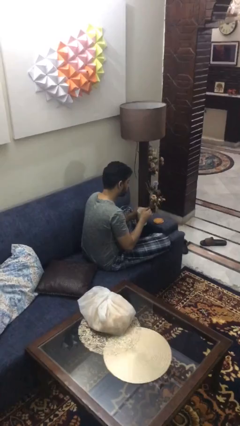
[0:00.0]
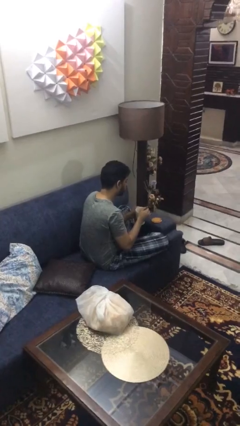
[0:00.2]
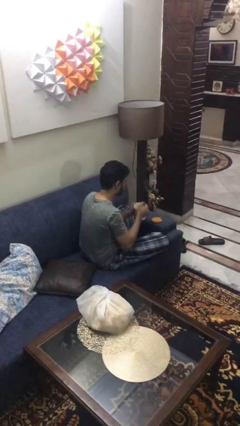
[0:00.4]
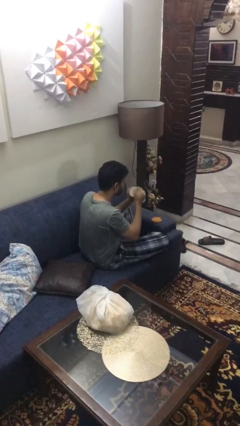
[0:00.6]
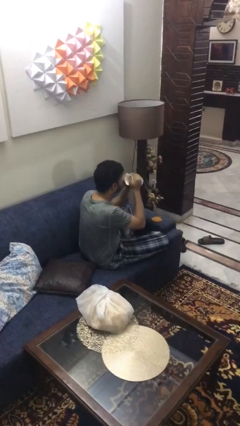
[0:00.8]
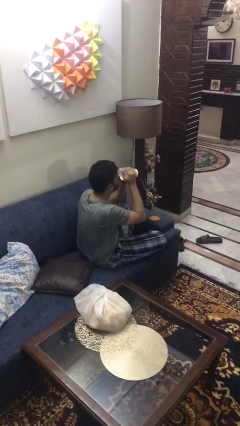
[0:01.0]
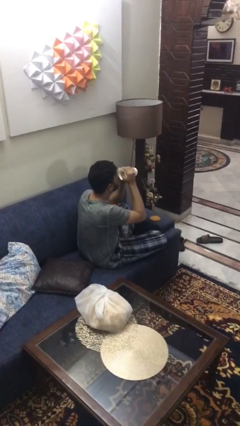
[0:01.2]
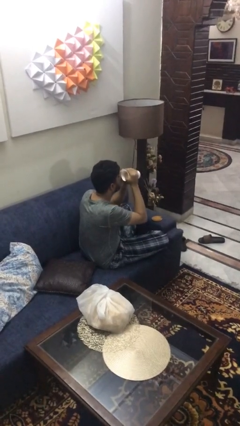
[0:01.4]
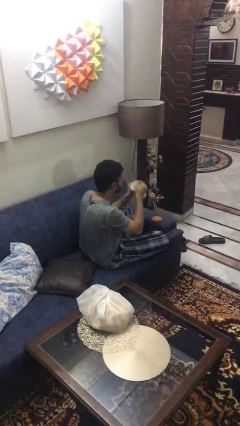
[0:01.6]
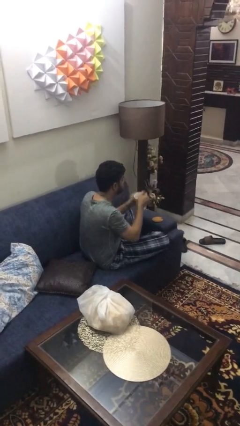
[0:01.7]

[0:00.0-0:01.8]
person drinks from mug

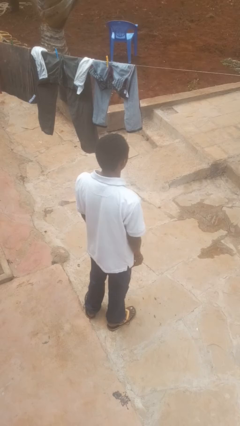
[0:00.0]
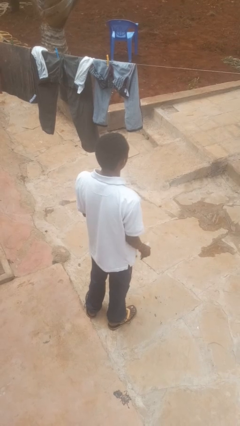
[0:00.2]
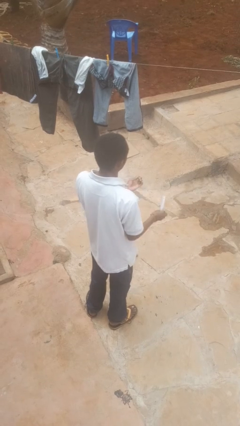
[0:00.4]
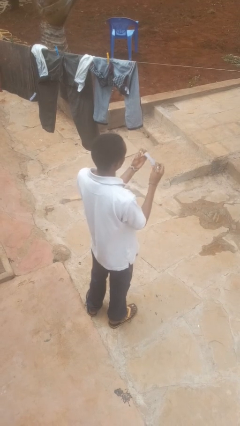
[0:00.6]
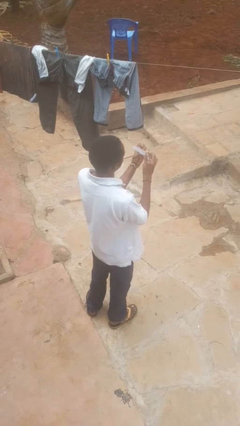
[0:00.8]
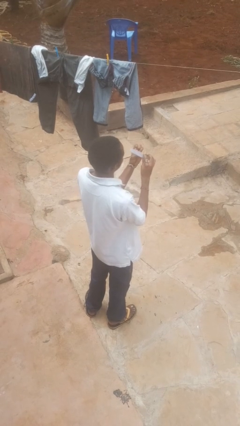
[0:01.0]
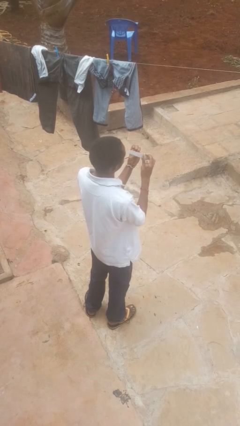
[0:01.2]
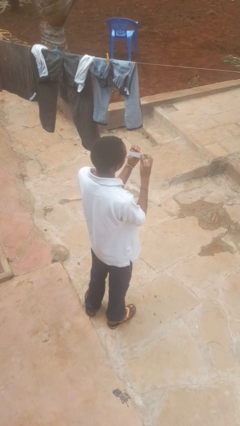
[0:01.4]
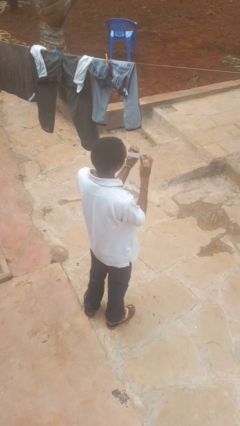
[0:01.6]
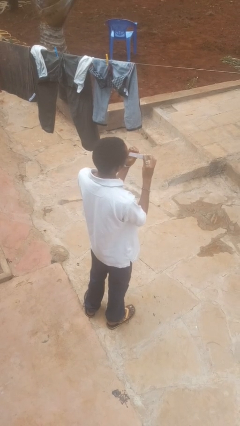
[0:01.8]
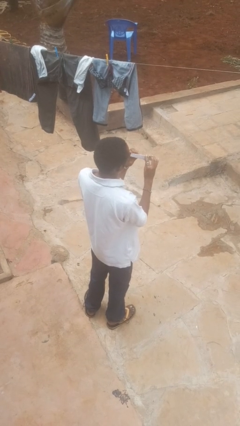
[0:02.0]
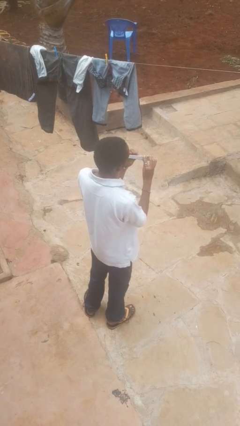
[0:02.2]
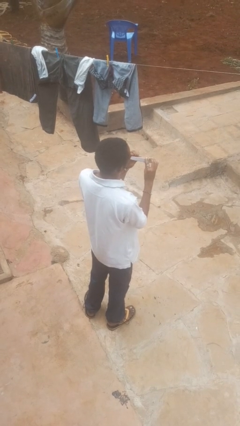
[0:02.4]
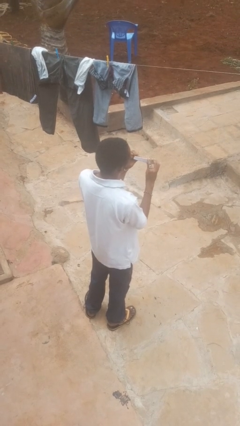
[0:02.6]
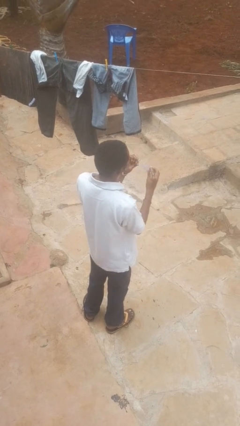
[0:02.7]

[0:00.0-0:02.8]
person files fingernails

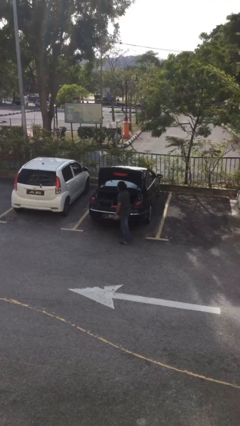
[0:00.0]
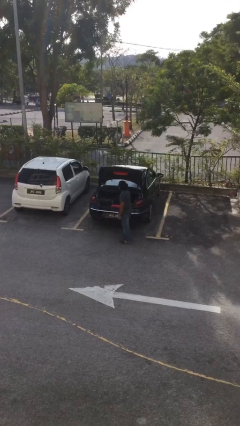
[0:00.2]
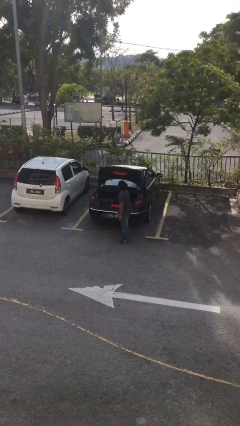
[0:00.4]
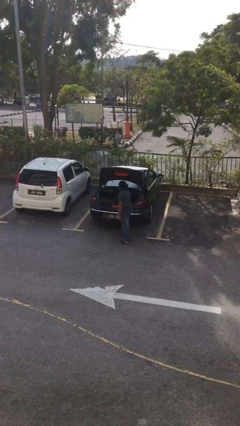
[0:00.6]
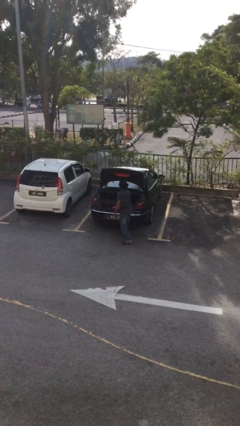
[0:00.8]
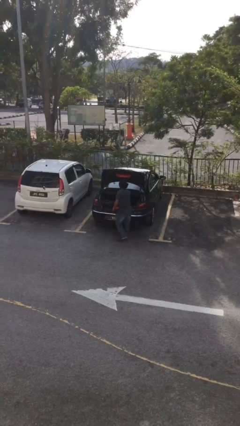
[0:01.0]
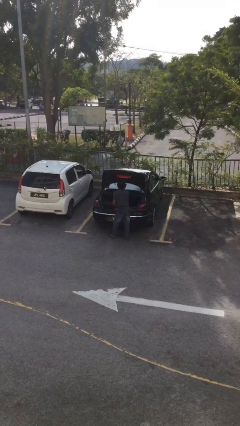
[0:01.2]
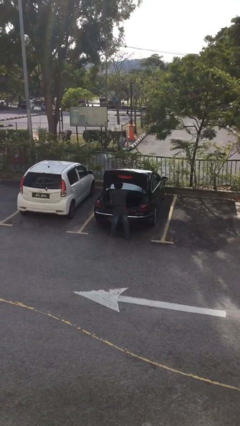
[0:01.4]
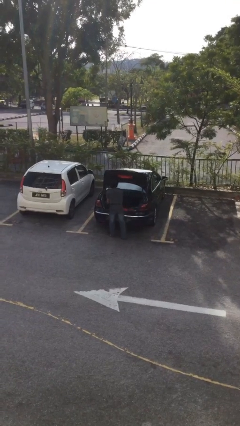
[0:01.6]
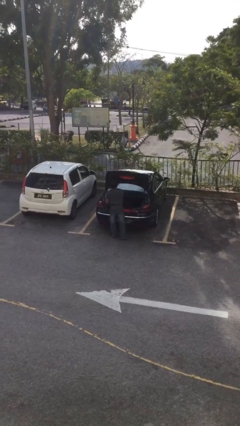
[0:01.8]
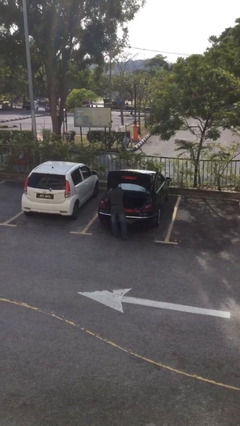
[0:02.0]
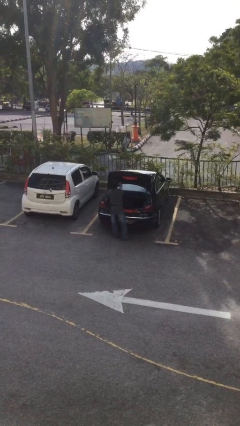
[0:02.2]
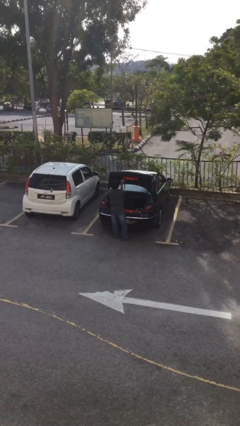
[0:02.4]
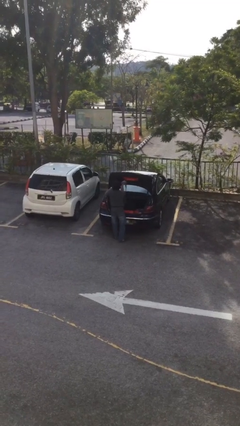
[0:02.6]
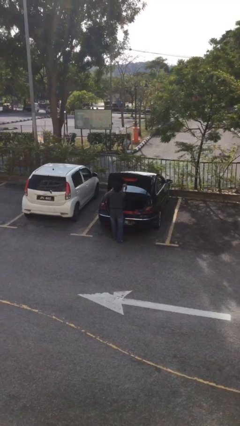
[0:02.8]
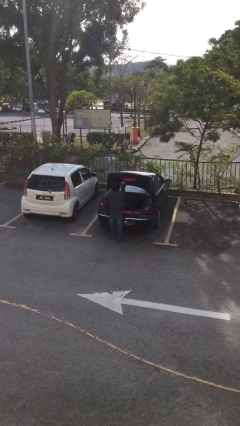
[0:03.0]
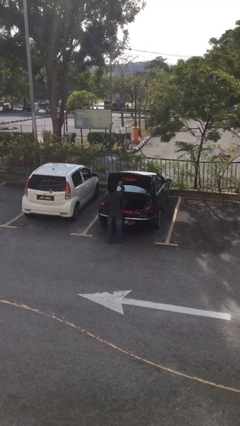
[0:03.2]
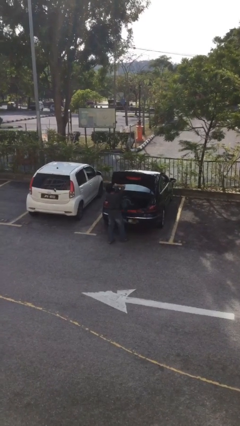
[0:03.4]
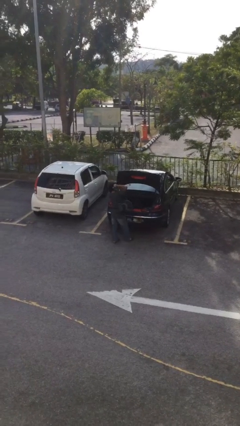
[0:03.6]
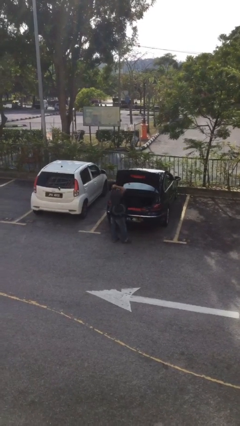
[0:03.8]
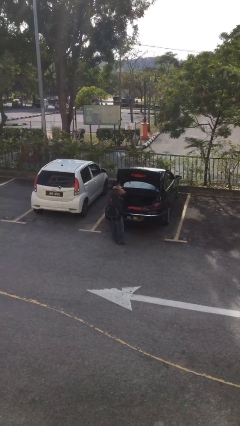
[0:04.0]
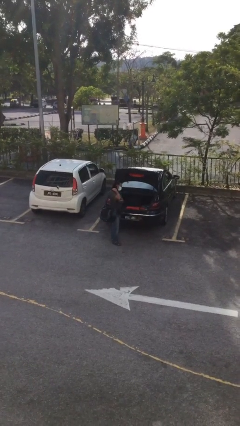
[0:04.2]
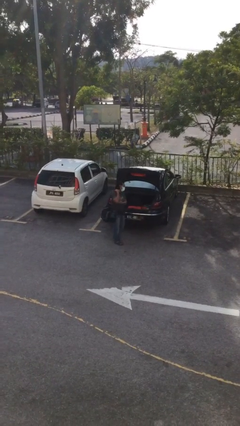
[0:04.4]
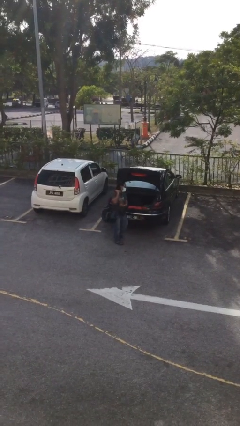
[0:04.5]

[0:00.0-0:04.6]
person unloads car

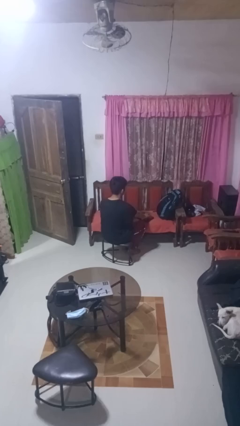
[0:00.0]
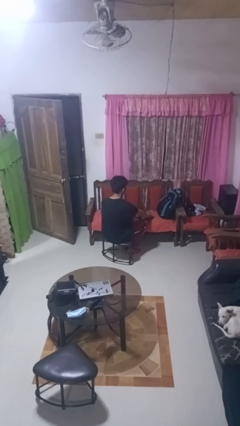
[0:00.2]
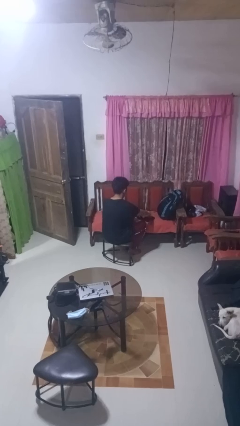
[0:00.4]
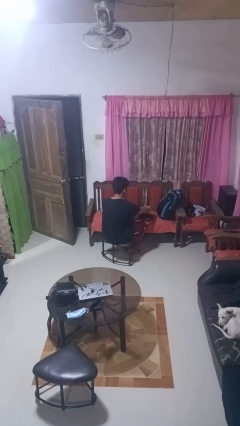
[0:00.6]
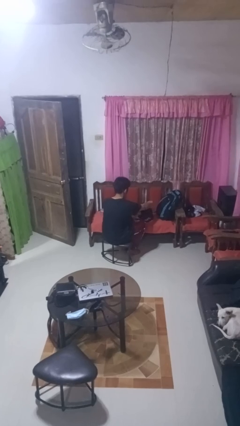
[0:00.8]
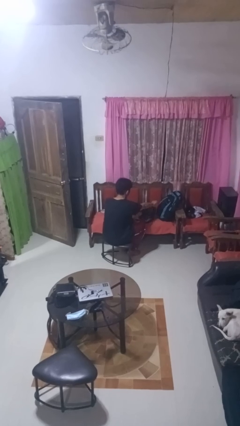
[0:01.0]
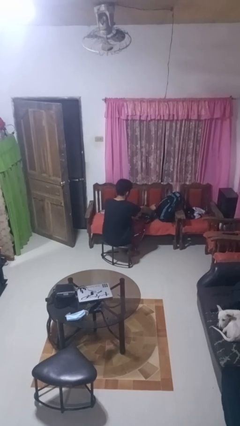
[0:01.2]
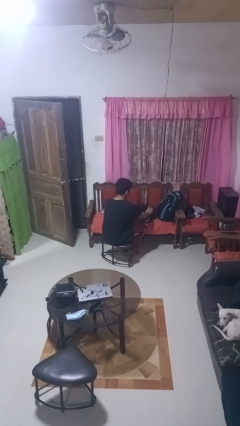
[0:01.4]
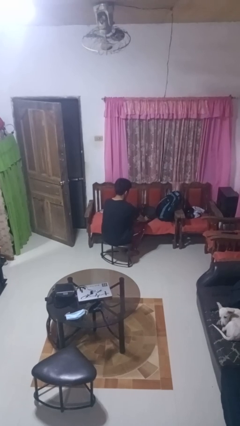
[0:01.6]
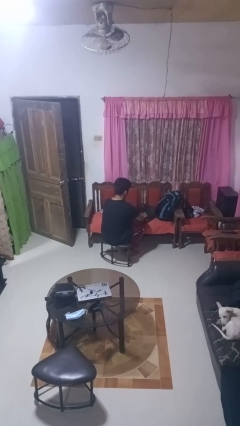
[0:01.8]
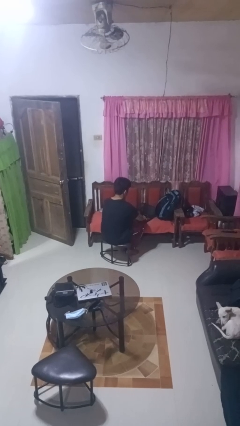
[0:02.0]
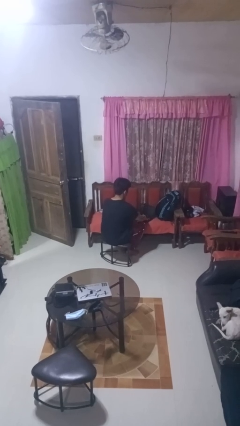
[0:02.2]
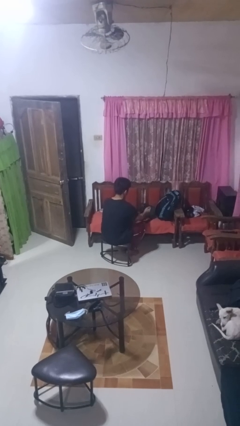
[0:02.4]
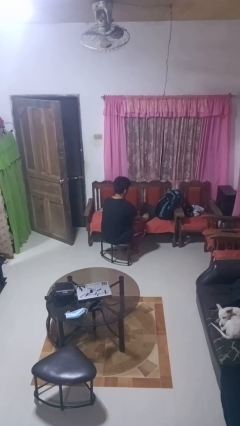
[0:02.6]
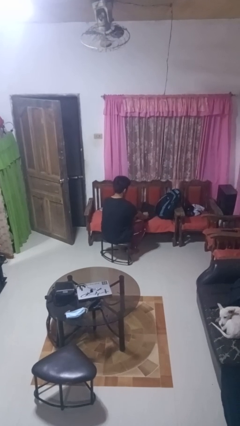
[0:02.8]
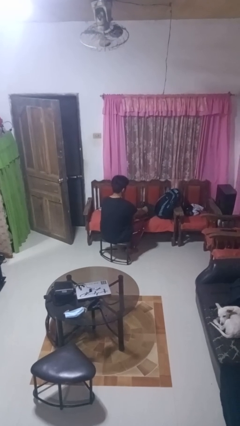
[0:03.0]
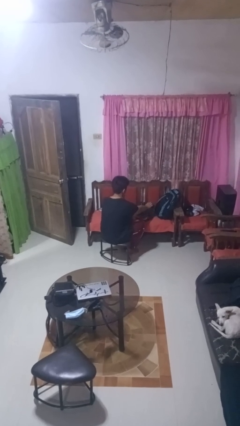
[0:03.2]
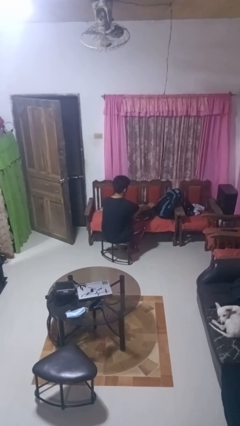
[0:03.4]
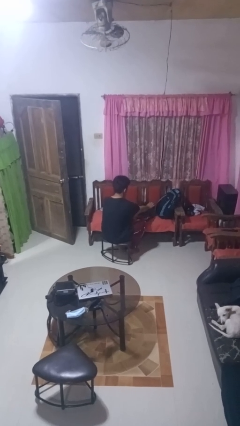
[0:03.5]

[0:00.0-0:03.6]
person opens laptop

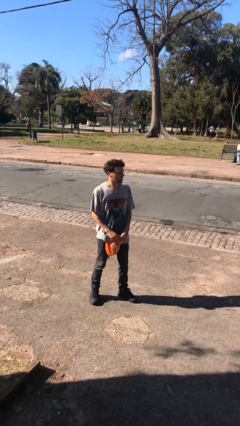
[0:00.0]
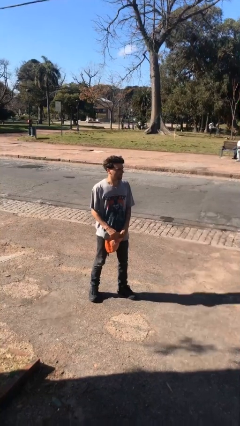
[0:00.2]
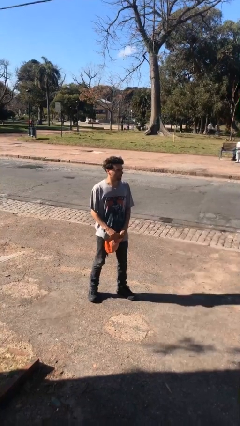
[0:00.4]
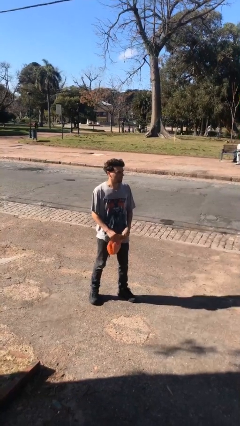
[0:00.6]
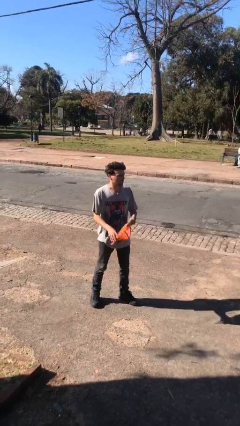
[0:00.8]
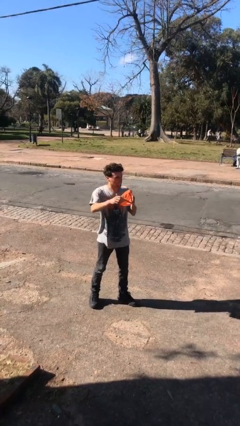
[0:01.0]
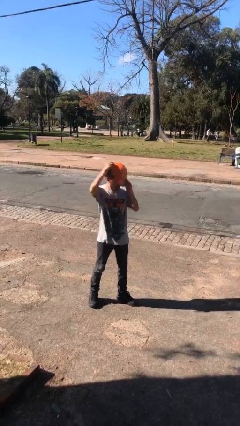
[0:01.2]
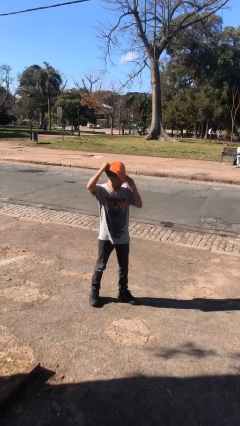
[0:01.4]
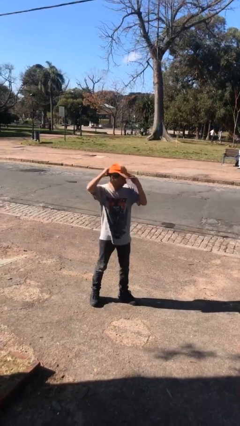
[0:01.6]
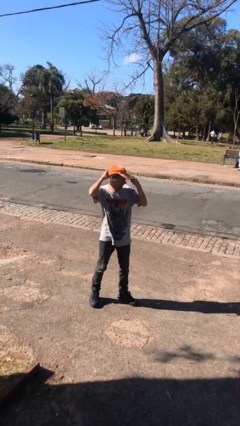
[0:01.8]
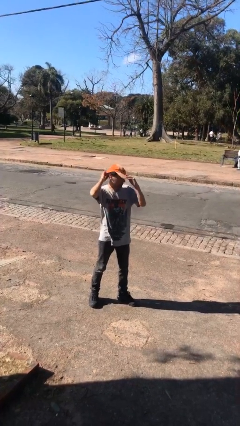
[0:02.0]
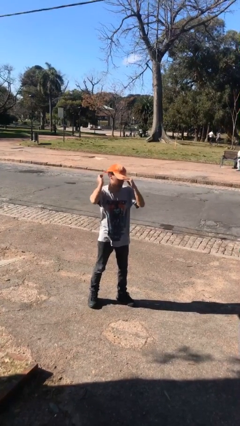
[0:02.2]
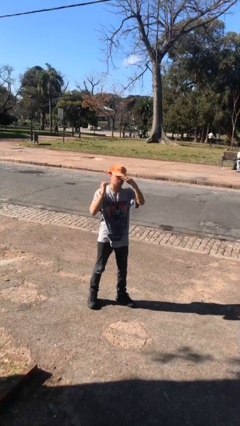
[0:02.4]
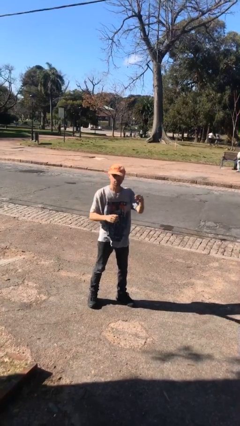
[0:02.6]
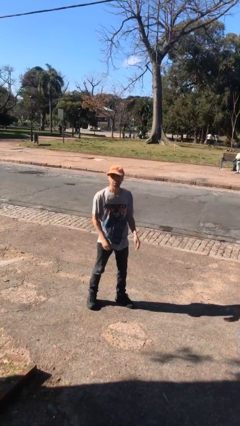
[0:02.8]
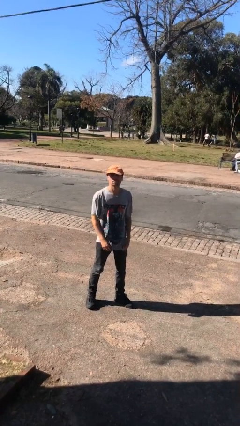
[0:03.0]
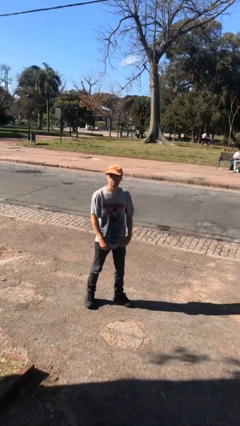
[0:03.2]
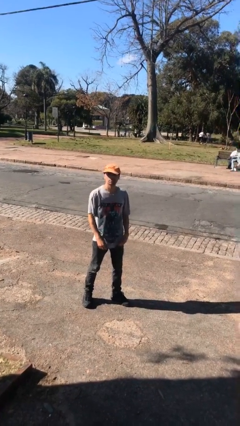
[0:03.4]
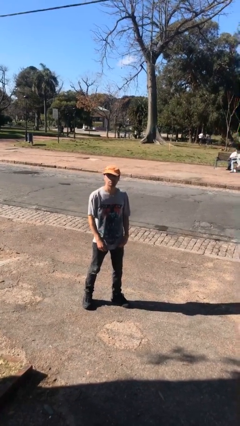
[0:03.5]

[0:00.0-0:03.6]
person puts on hat

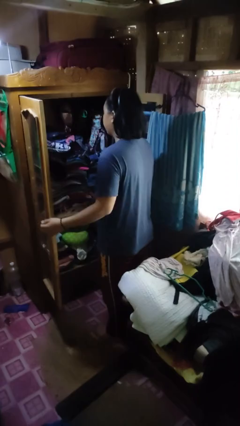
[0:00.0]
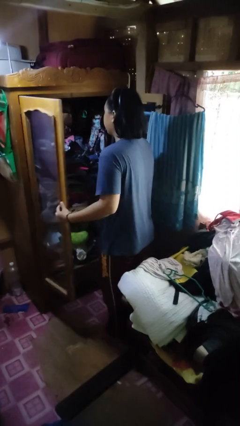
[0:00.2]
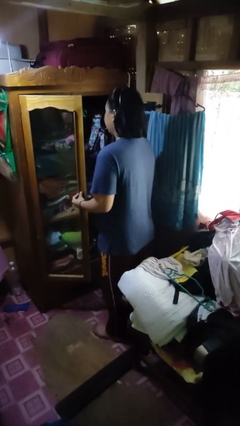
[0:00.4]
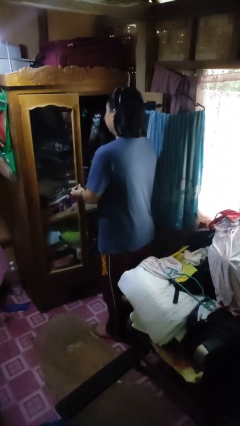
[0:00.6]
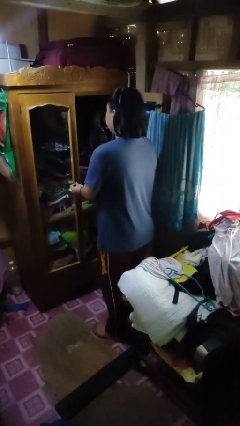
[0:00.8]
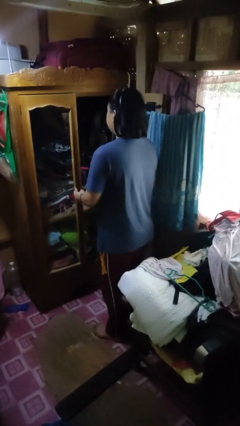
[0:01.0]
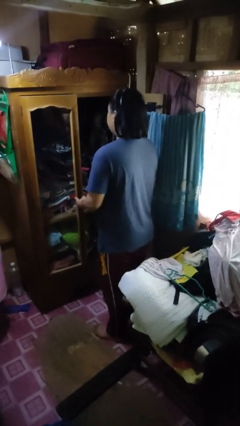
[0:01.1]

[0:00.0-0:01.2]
person closes closet door
